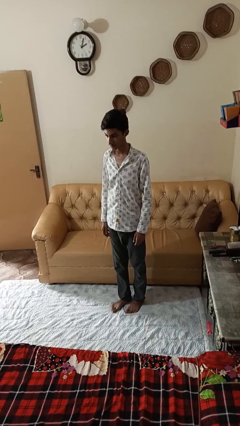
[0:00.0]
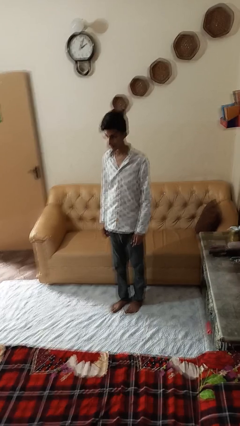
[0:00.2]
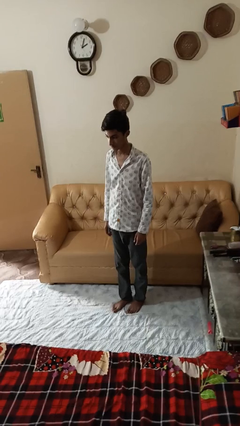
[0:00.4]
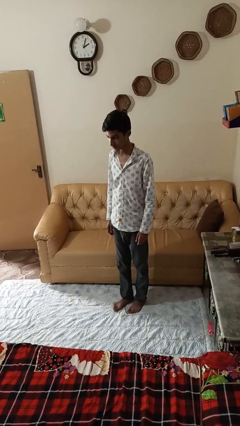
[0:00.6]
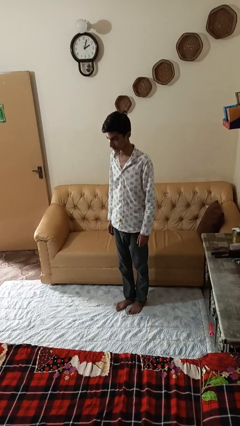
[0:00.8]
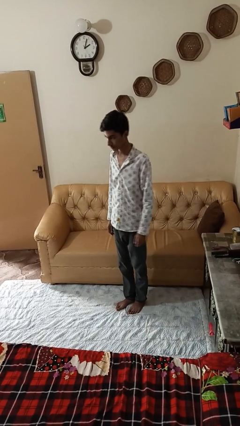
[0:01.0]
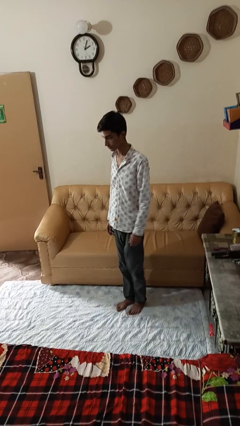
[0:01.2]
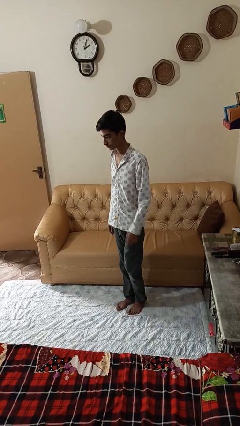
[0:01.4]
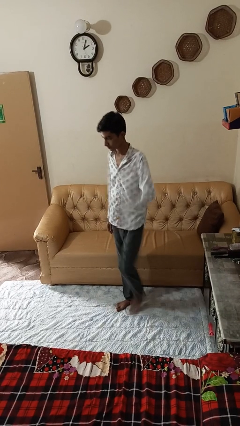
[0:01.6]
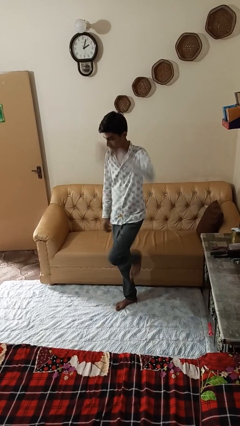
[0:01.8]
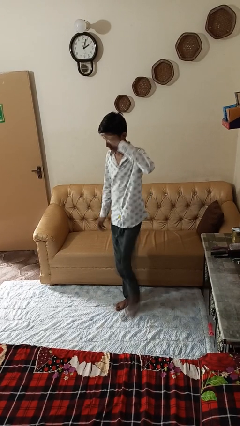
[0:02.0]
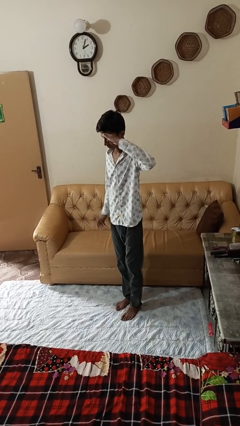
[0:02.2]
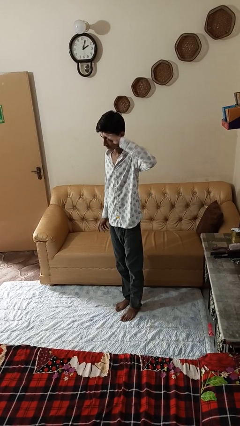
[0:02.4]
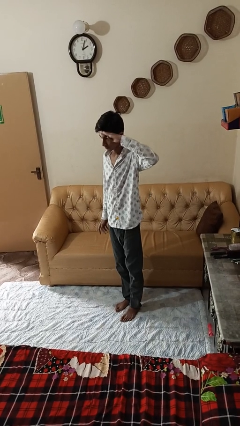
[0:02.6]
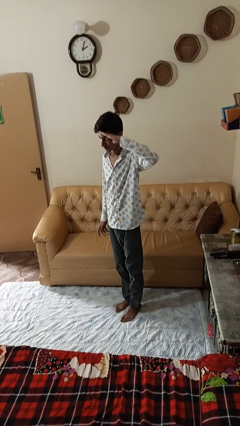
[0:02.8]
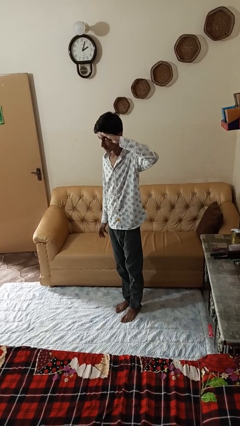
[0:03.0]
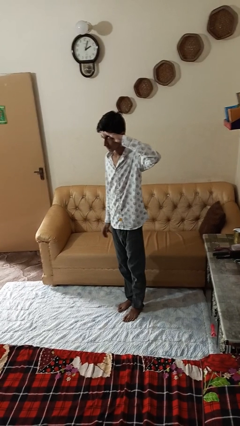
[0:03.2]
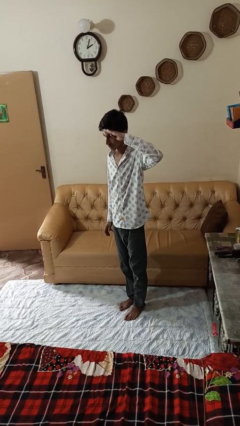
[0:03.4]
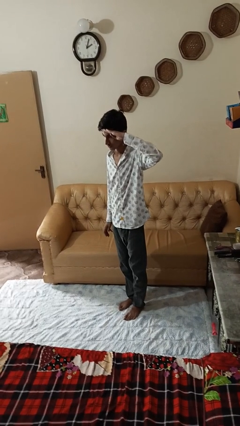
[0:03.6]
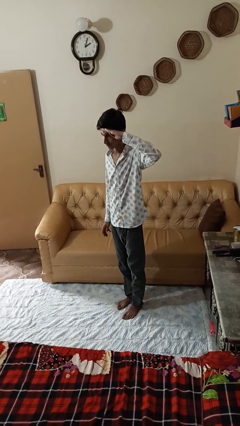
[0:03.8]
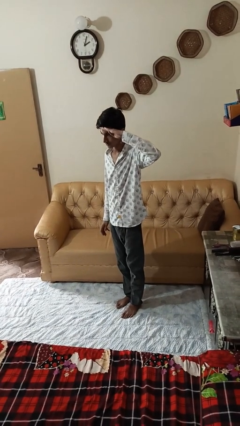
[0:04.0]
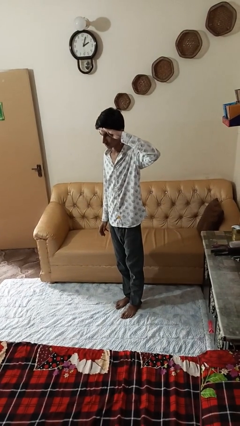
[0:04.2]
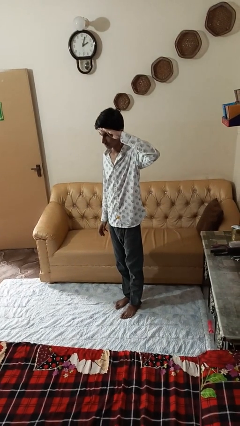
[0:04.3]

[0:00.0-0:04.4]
person salutes

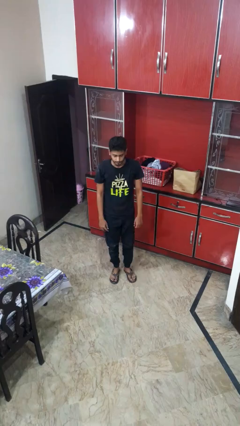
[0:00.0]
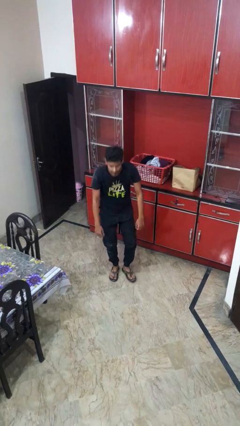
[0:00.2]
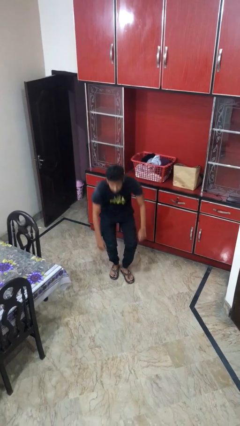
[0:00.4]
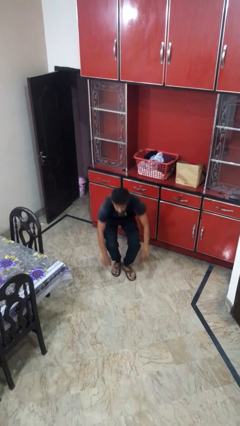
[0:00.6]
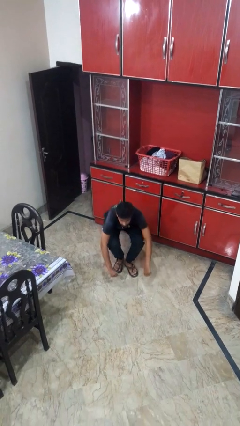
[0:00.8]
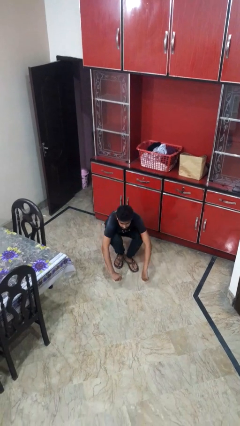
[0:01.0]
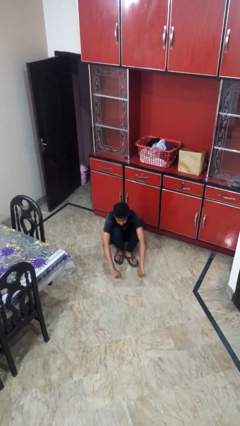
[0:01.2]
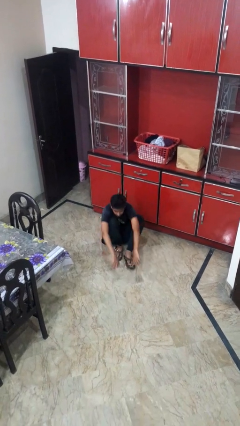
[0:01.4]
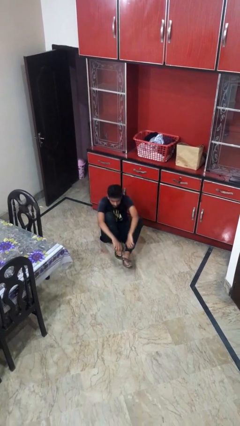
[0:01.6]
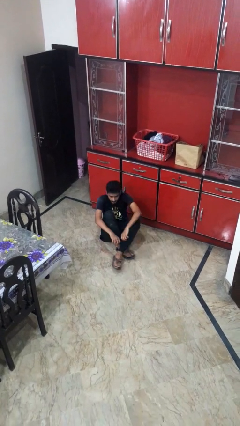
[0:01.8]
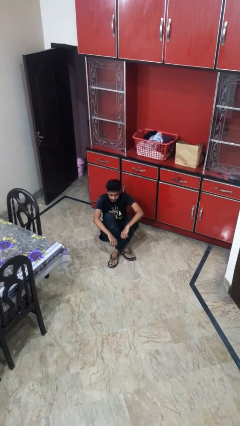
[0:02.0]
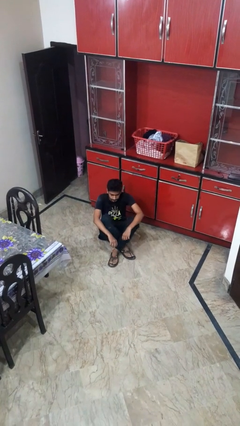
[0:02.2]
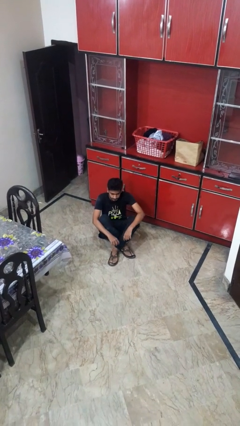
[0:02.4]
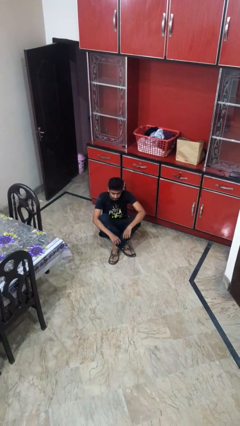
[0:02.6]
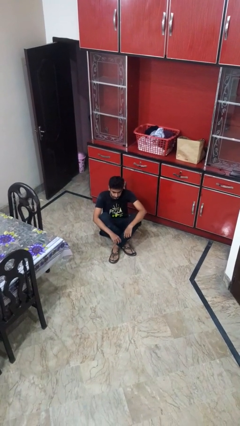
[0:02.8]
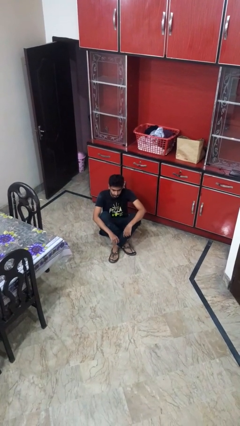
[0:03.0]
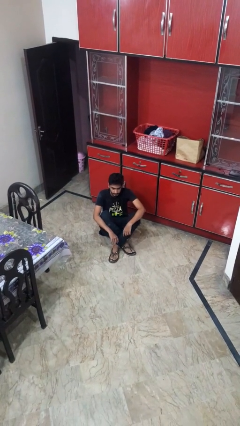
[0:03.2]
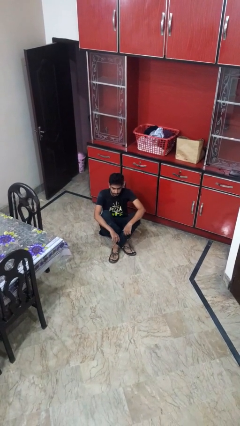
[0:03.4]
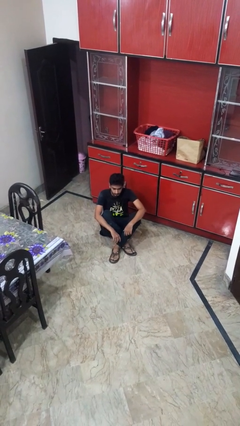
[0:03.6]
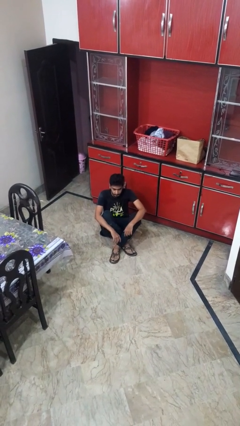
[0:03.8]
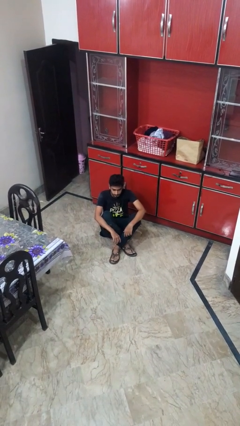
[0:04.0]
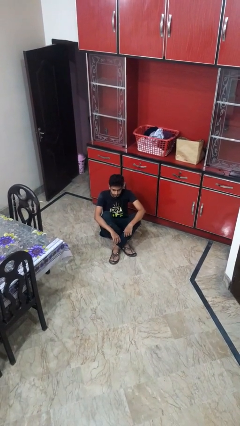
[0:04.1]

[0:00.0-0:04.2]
person sits crisscross

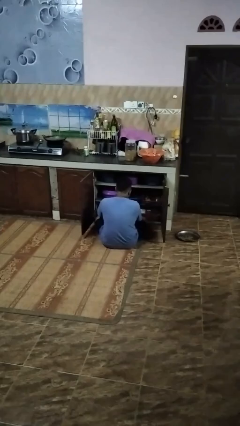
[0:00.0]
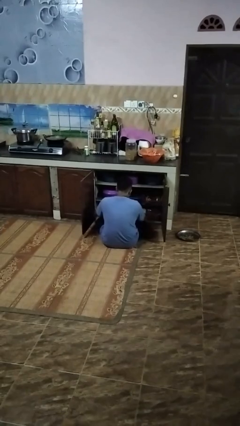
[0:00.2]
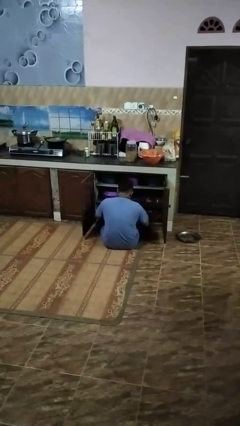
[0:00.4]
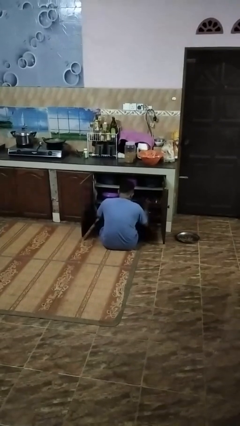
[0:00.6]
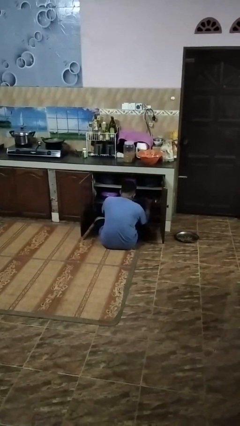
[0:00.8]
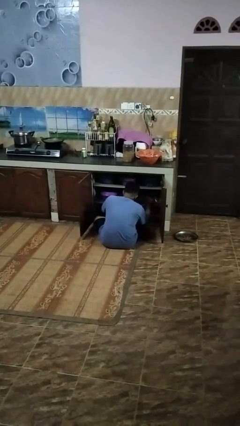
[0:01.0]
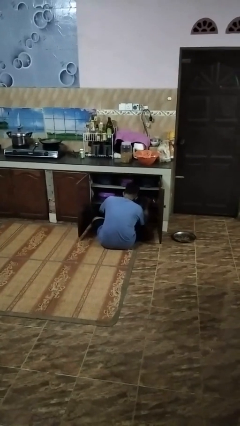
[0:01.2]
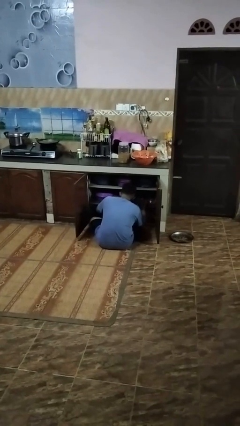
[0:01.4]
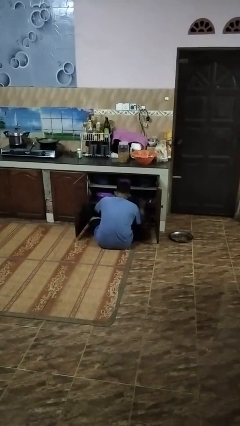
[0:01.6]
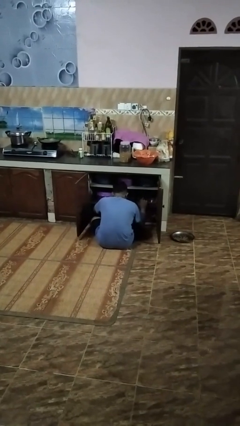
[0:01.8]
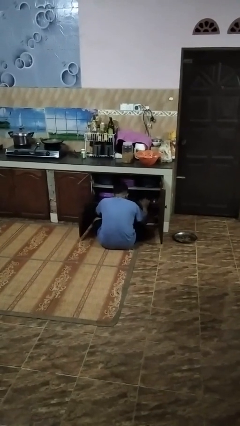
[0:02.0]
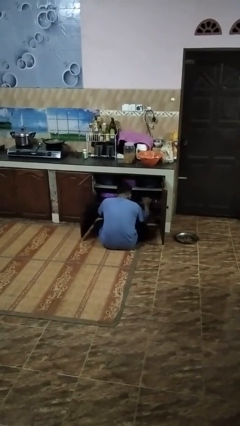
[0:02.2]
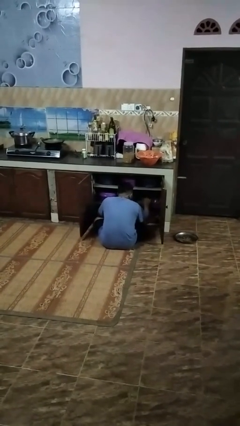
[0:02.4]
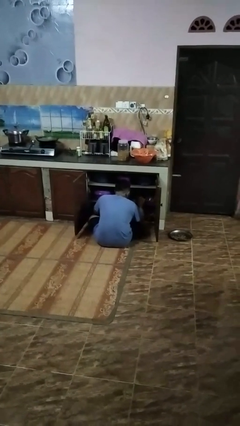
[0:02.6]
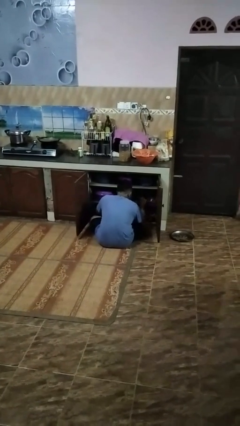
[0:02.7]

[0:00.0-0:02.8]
person searches in kitchen drawer

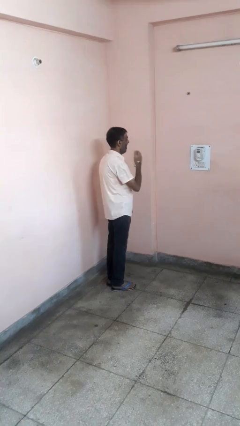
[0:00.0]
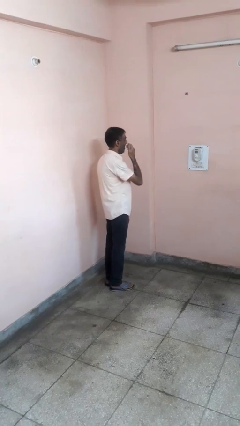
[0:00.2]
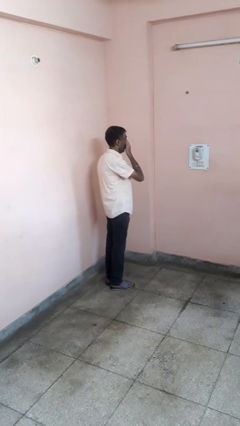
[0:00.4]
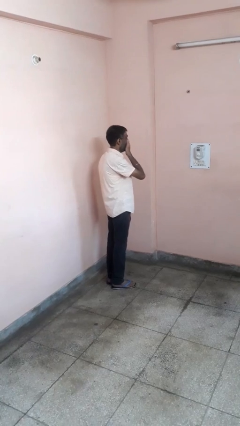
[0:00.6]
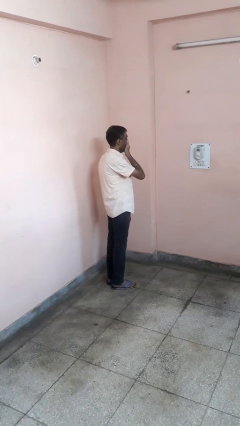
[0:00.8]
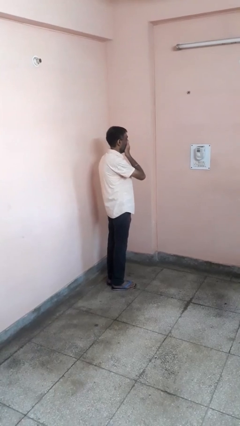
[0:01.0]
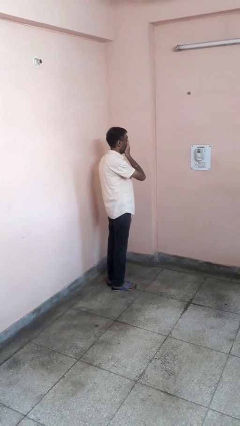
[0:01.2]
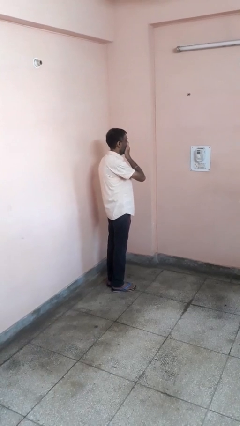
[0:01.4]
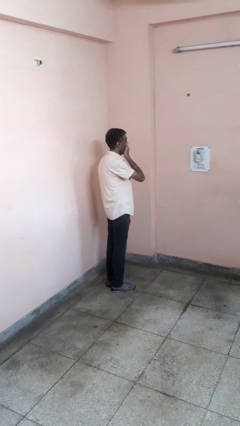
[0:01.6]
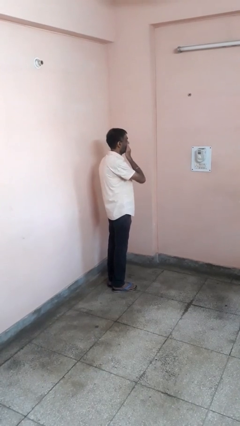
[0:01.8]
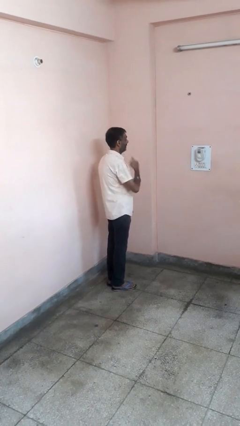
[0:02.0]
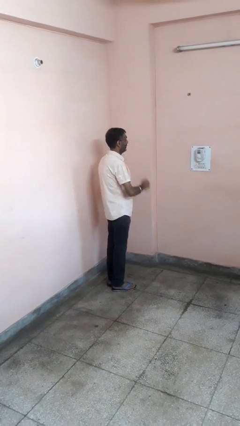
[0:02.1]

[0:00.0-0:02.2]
person yawns

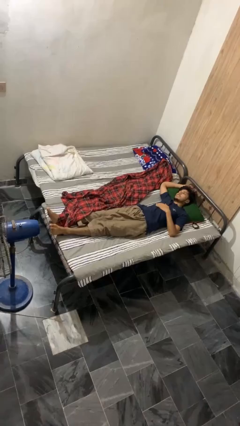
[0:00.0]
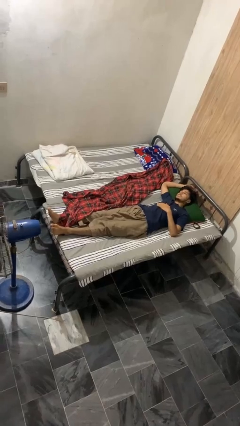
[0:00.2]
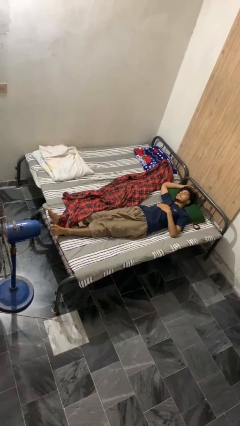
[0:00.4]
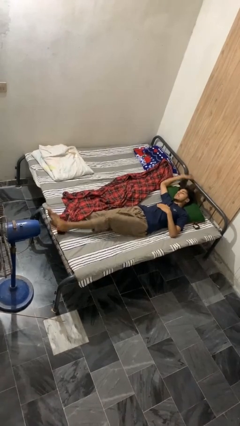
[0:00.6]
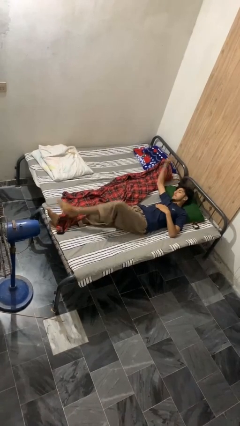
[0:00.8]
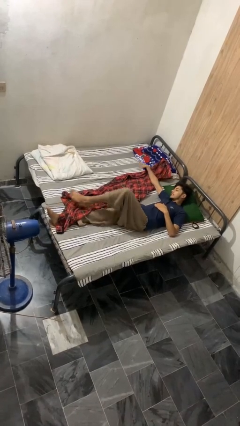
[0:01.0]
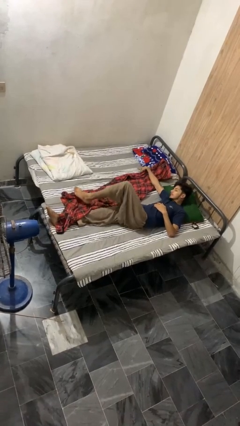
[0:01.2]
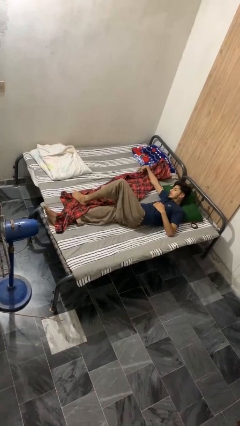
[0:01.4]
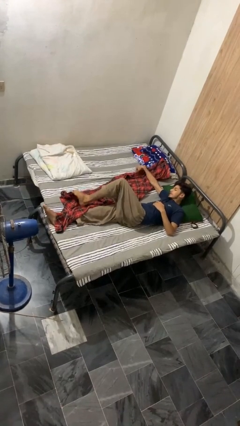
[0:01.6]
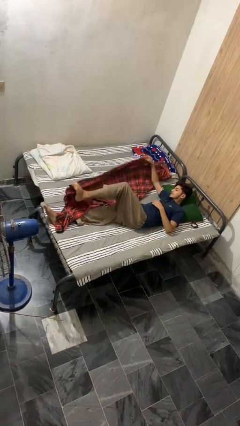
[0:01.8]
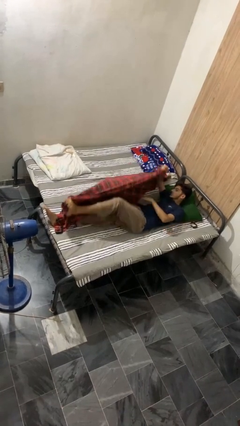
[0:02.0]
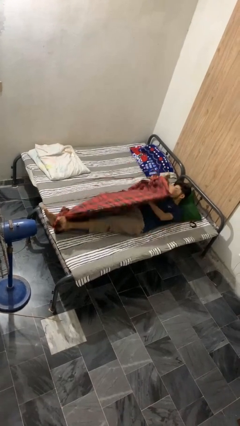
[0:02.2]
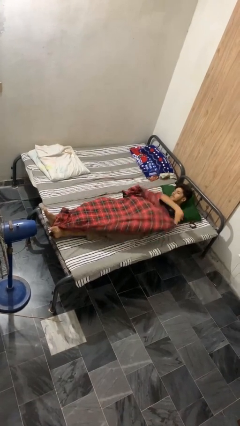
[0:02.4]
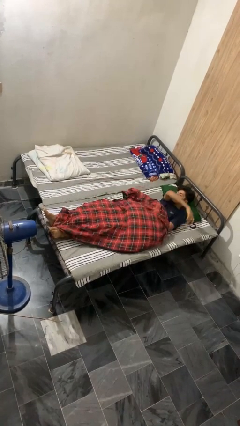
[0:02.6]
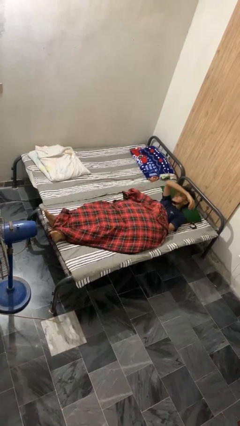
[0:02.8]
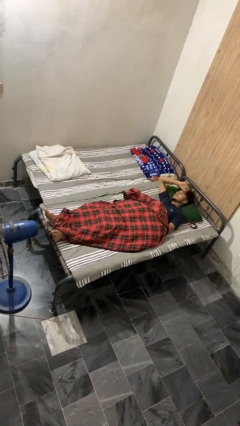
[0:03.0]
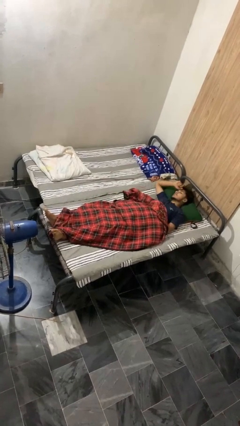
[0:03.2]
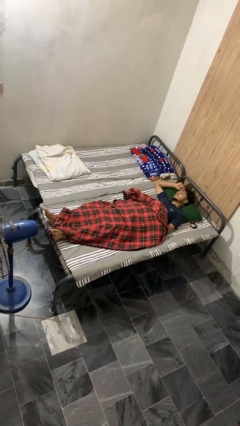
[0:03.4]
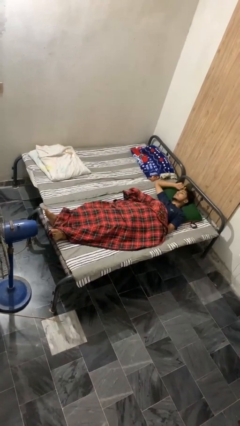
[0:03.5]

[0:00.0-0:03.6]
person covers with bedsheets

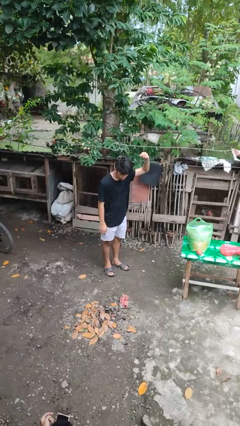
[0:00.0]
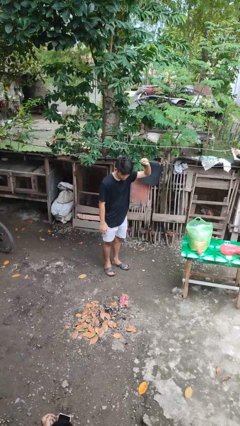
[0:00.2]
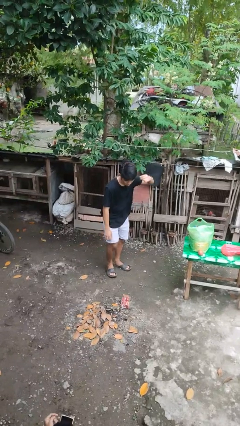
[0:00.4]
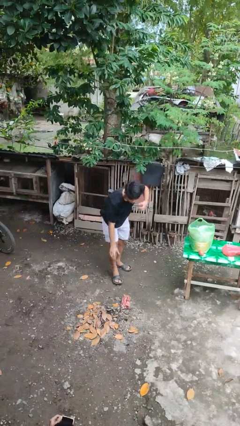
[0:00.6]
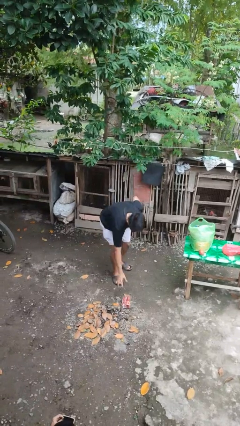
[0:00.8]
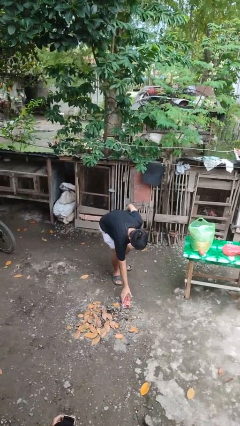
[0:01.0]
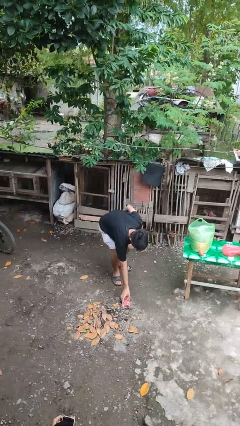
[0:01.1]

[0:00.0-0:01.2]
person picks up object from floor
